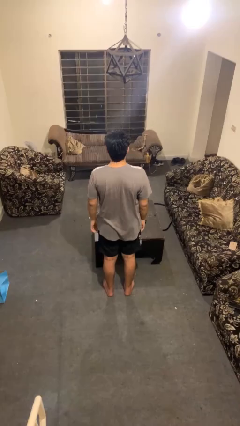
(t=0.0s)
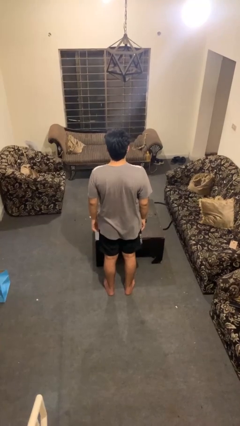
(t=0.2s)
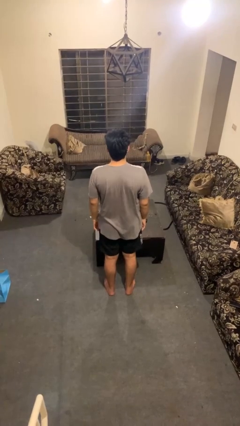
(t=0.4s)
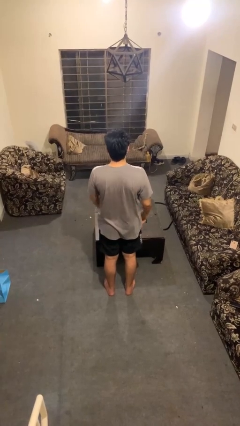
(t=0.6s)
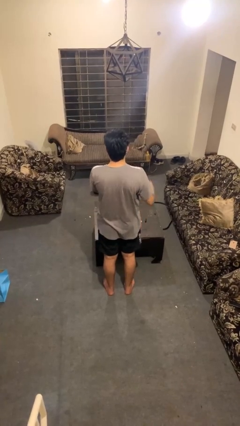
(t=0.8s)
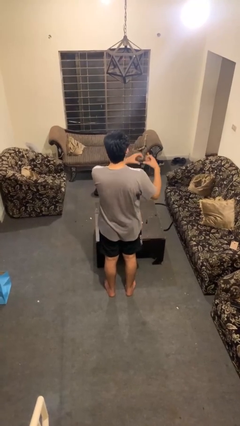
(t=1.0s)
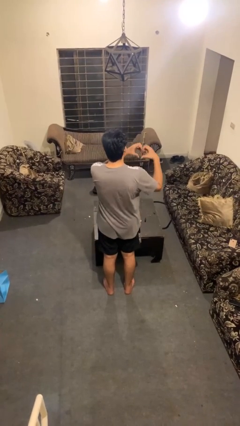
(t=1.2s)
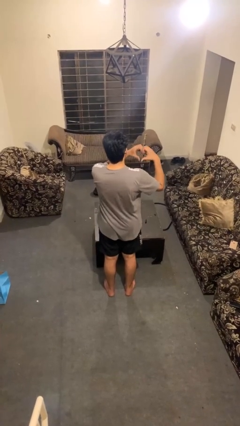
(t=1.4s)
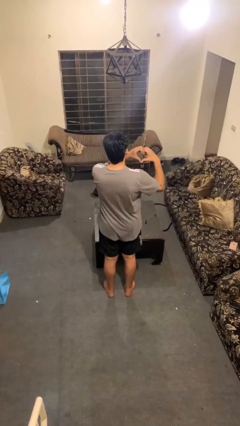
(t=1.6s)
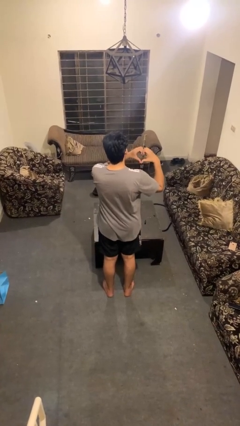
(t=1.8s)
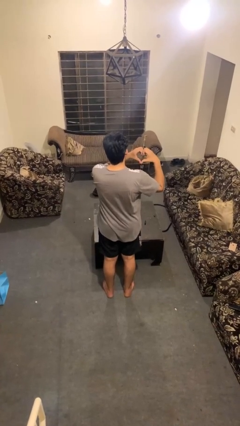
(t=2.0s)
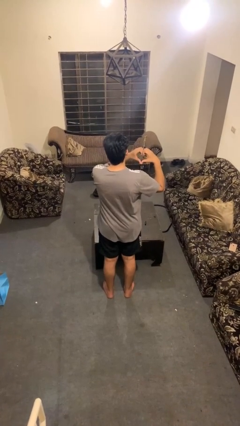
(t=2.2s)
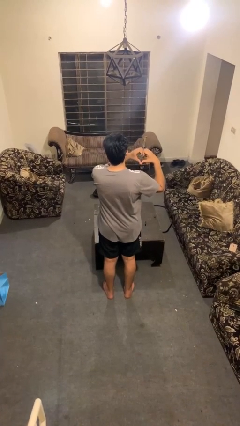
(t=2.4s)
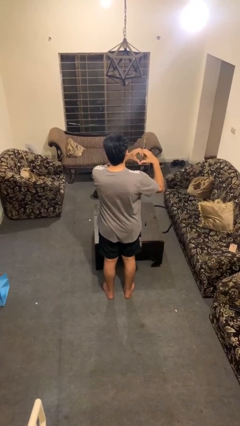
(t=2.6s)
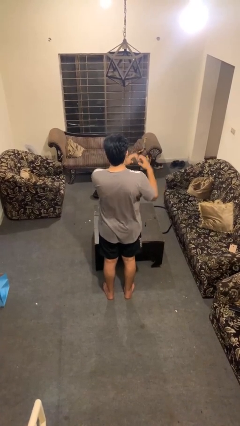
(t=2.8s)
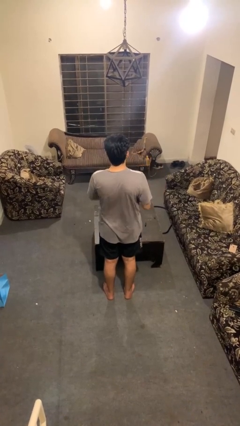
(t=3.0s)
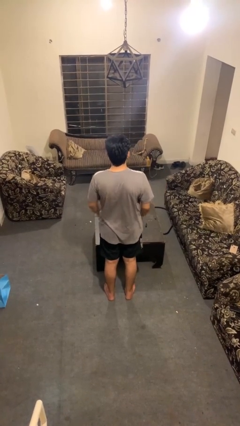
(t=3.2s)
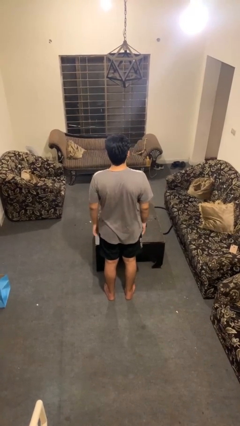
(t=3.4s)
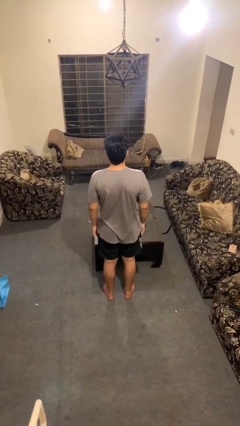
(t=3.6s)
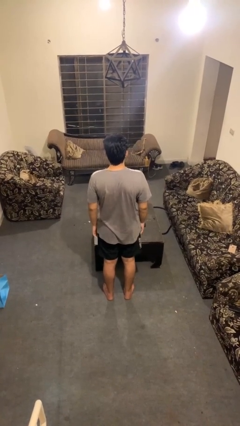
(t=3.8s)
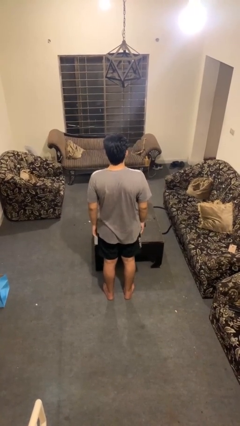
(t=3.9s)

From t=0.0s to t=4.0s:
person gestures heart

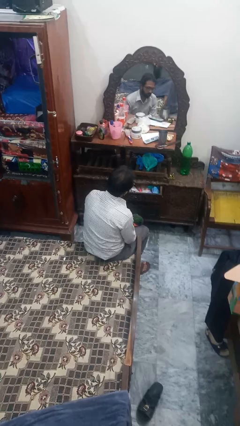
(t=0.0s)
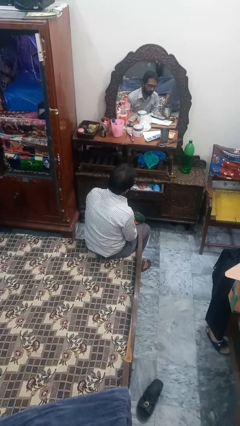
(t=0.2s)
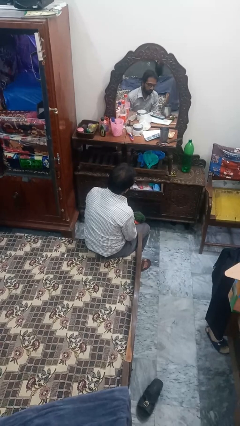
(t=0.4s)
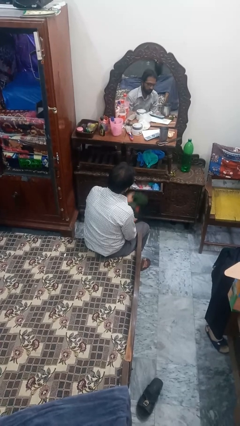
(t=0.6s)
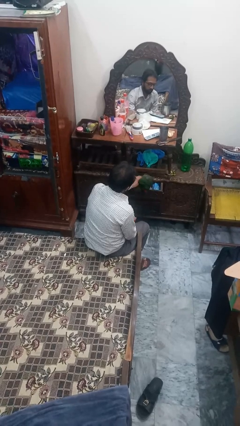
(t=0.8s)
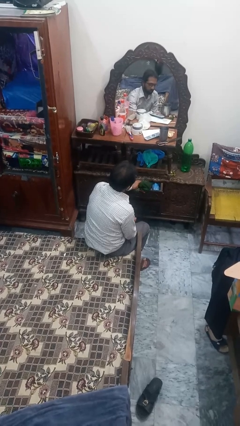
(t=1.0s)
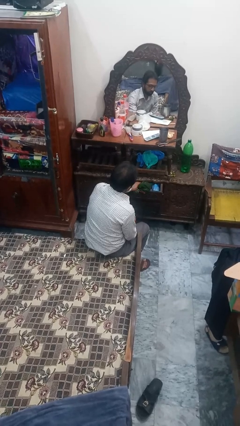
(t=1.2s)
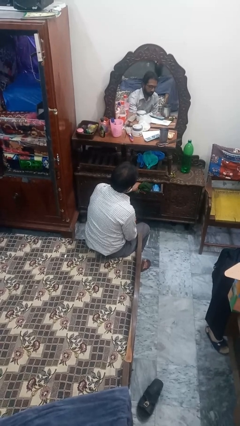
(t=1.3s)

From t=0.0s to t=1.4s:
person puts clothes into dresser

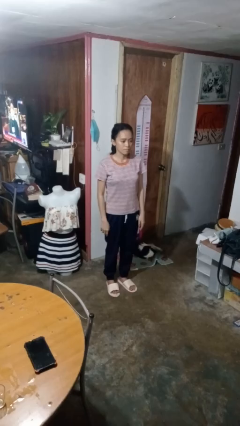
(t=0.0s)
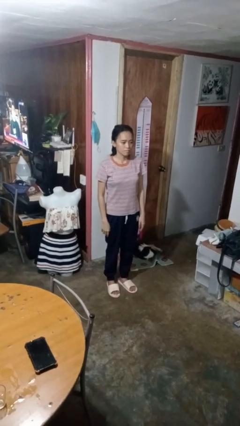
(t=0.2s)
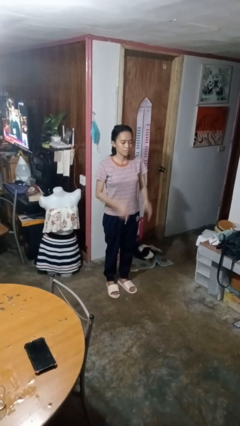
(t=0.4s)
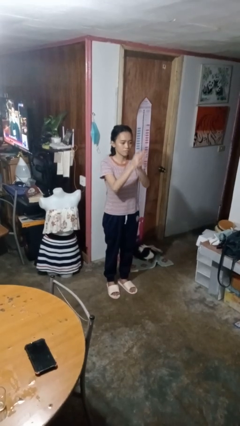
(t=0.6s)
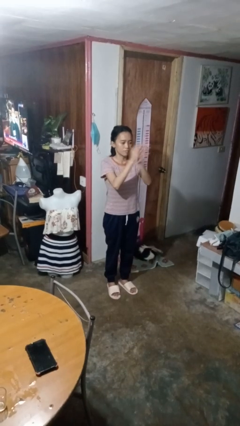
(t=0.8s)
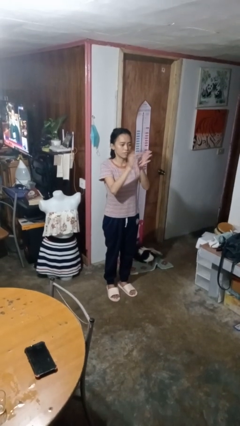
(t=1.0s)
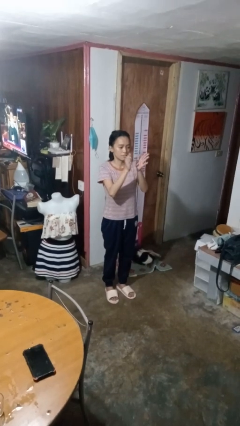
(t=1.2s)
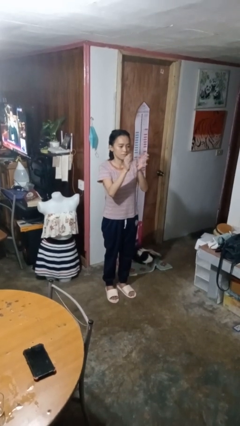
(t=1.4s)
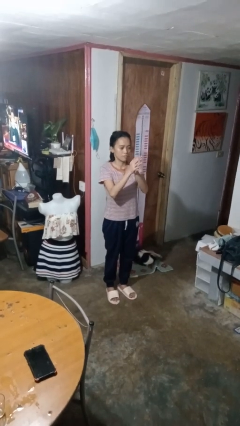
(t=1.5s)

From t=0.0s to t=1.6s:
person claps hands

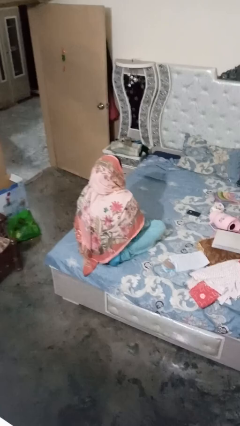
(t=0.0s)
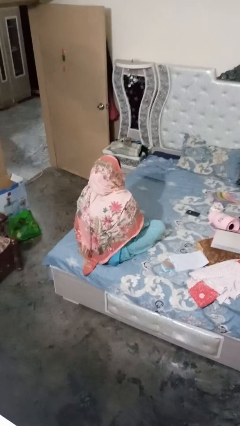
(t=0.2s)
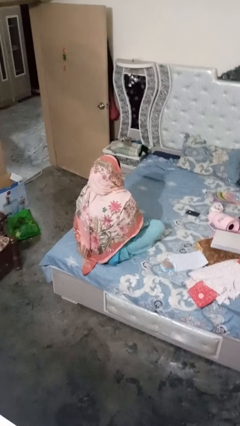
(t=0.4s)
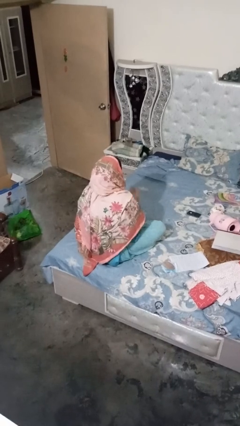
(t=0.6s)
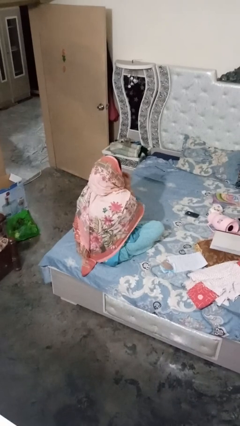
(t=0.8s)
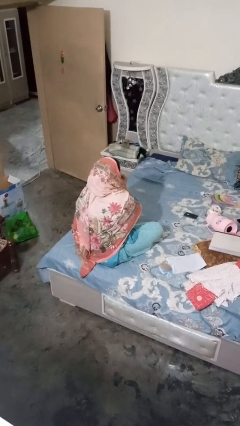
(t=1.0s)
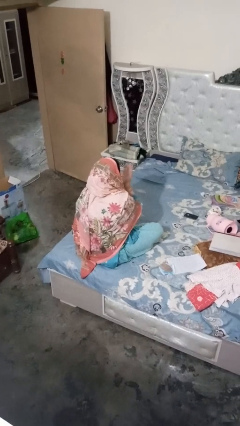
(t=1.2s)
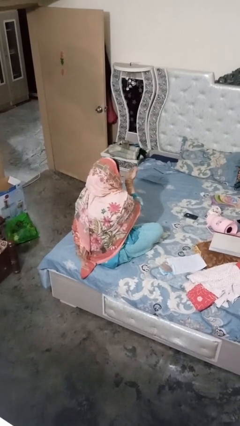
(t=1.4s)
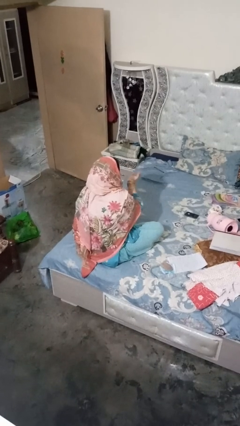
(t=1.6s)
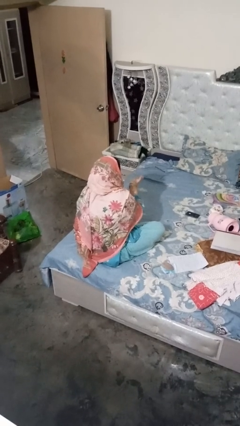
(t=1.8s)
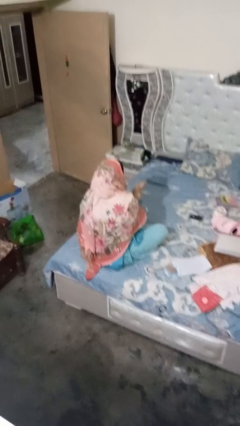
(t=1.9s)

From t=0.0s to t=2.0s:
person gestures blow kiss

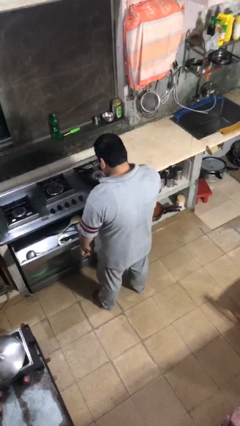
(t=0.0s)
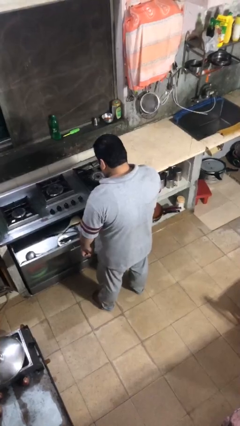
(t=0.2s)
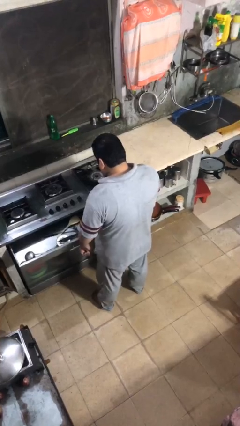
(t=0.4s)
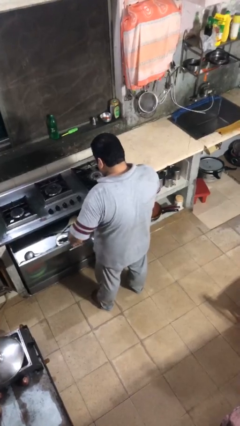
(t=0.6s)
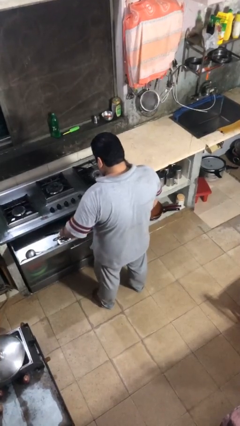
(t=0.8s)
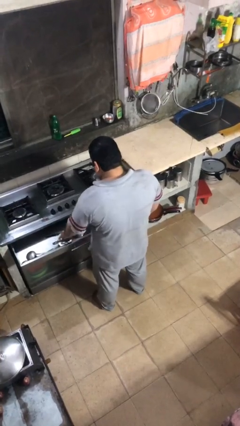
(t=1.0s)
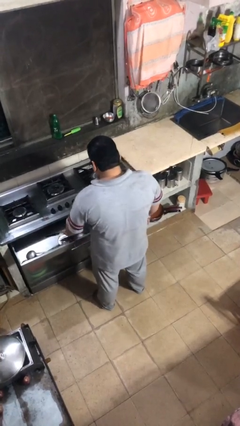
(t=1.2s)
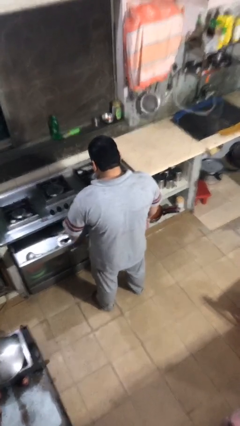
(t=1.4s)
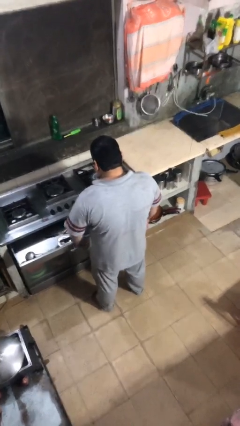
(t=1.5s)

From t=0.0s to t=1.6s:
person puts object into kitchen drawer

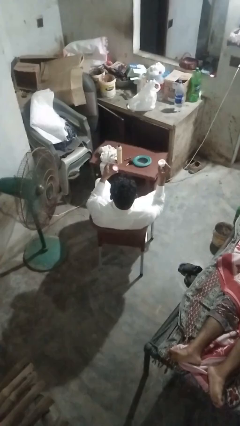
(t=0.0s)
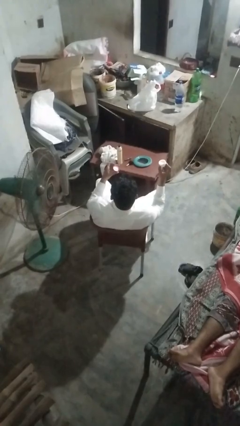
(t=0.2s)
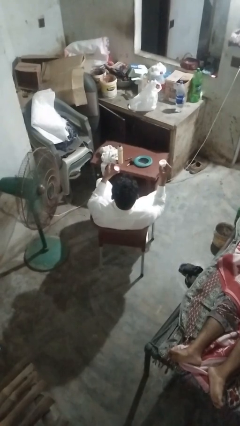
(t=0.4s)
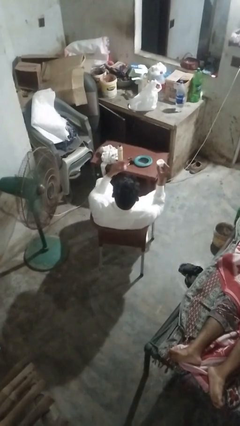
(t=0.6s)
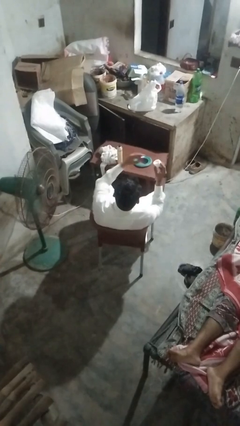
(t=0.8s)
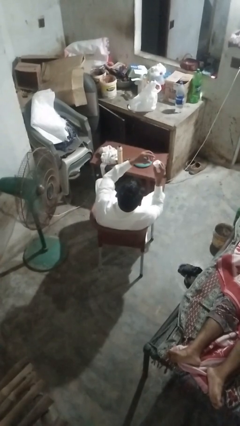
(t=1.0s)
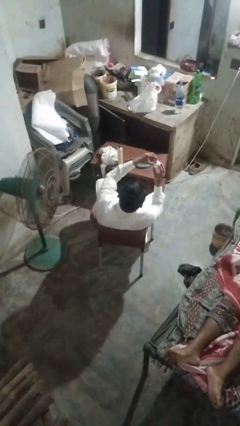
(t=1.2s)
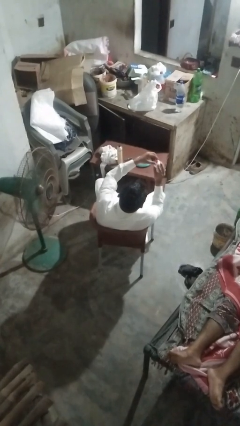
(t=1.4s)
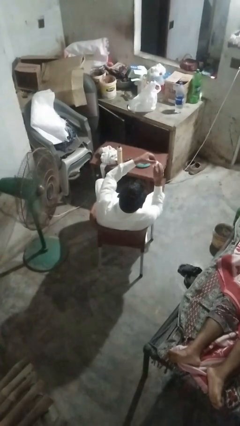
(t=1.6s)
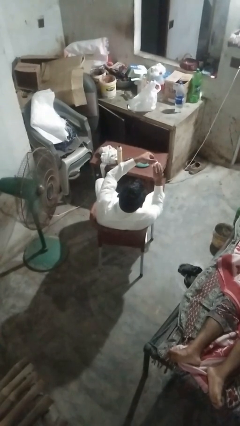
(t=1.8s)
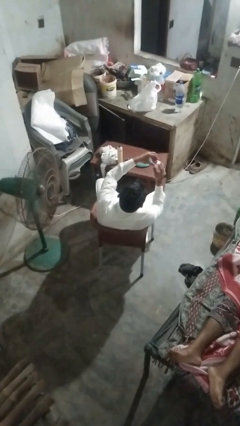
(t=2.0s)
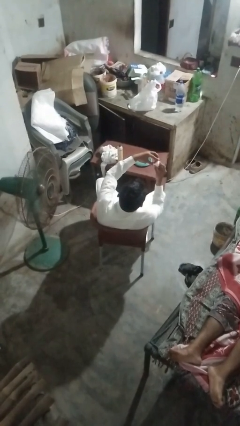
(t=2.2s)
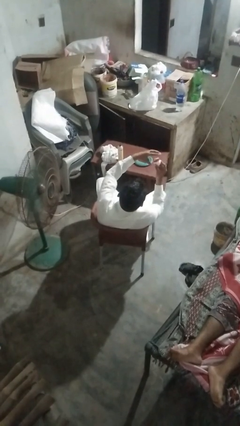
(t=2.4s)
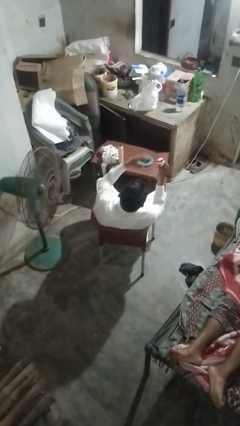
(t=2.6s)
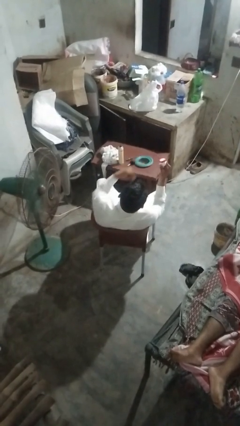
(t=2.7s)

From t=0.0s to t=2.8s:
person closes jar

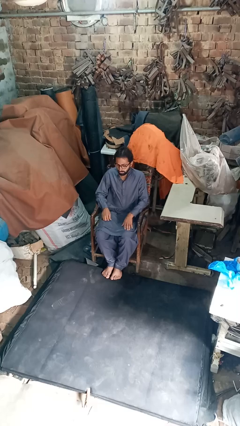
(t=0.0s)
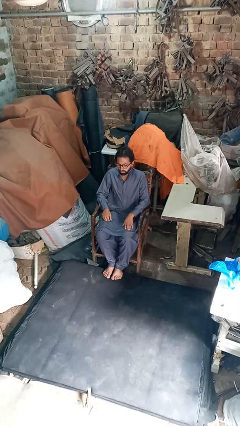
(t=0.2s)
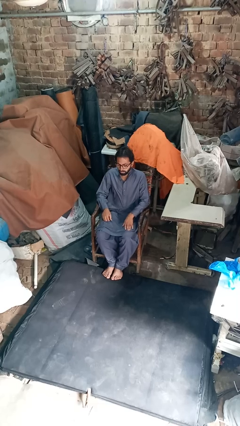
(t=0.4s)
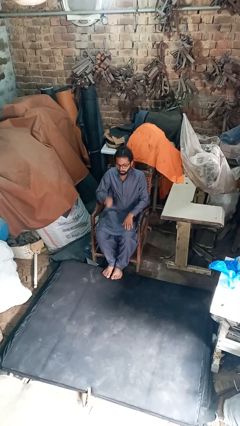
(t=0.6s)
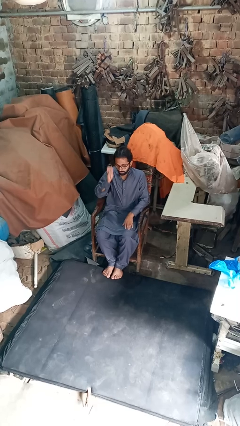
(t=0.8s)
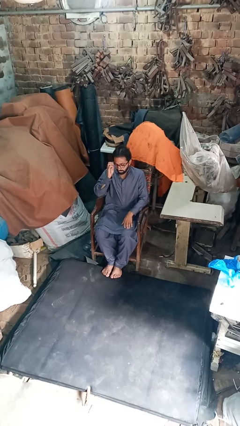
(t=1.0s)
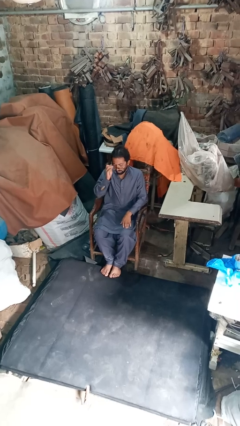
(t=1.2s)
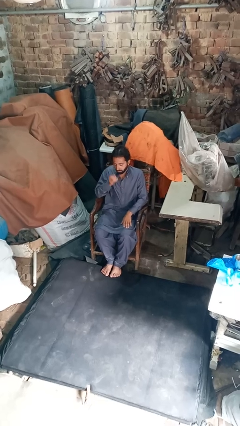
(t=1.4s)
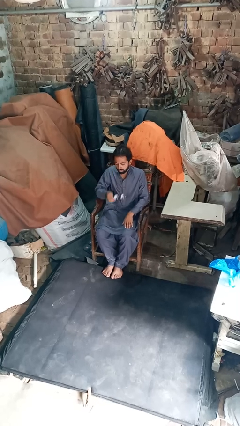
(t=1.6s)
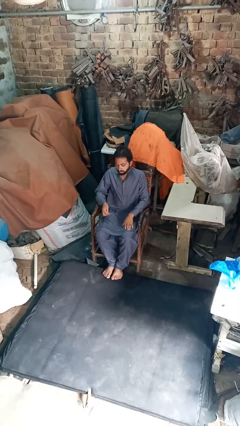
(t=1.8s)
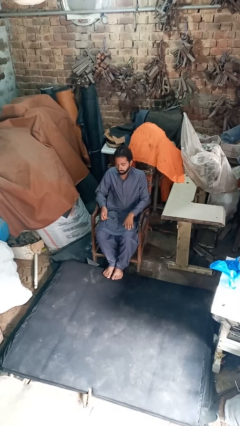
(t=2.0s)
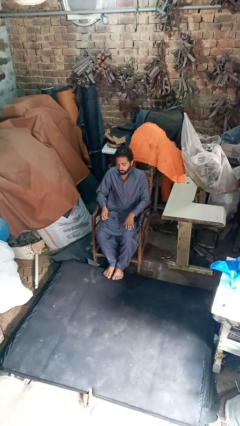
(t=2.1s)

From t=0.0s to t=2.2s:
person takes off glasses

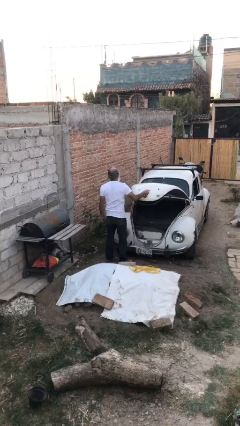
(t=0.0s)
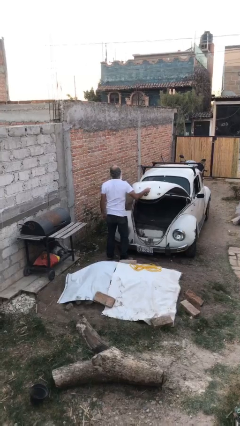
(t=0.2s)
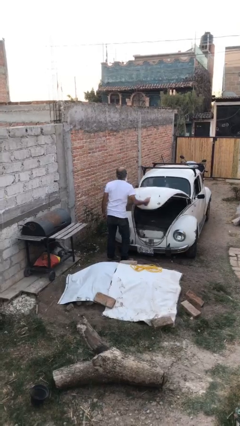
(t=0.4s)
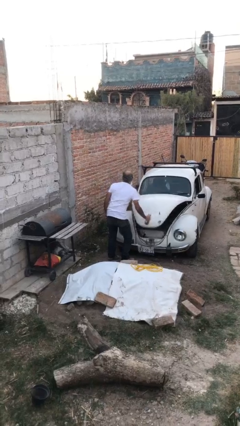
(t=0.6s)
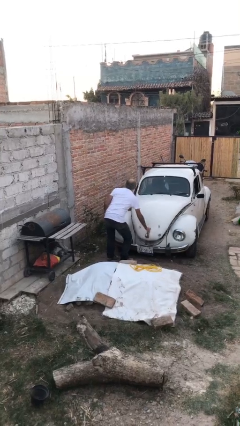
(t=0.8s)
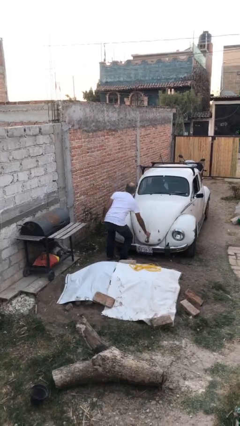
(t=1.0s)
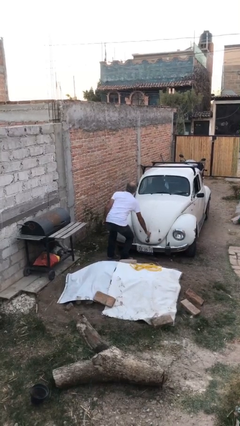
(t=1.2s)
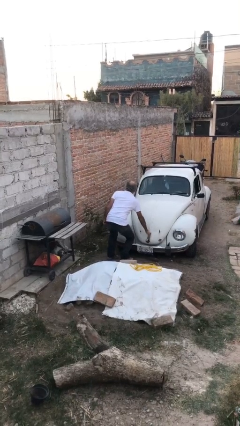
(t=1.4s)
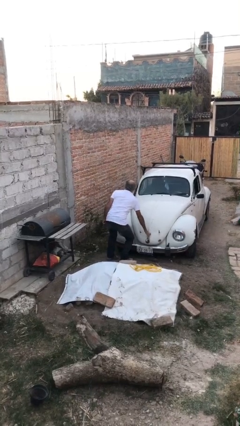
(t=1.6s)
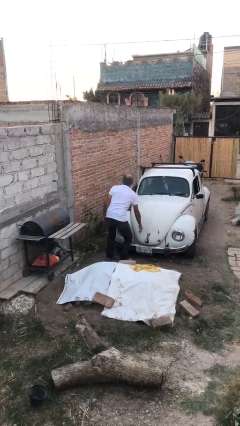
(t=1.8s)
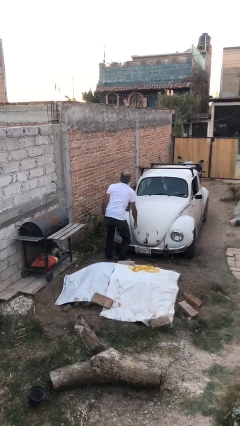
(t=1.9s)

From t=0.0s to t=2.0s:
person closes car trunk
